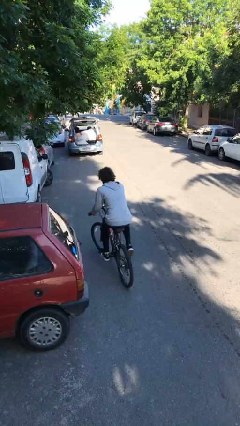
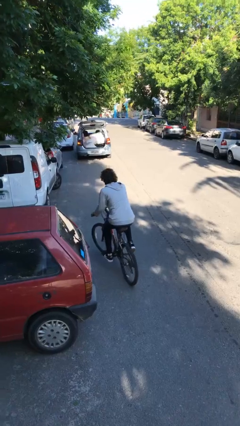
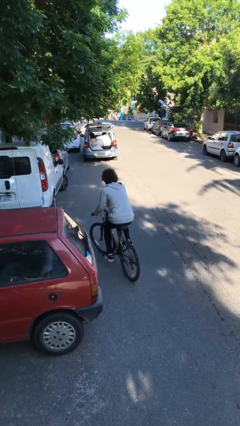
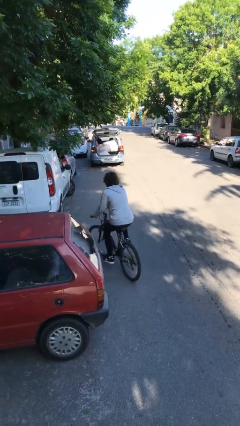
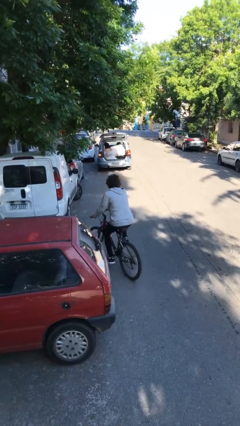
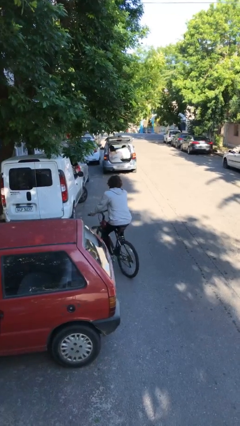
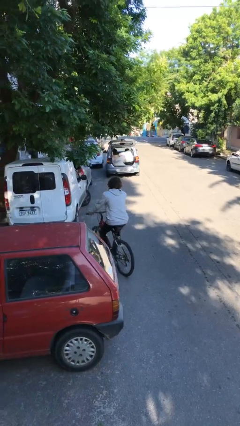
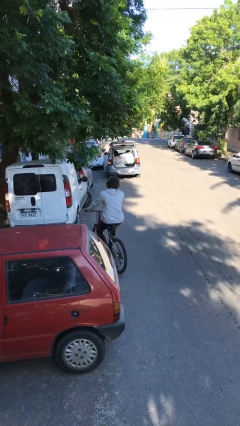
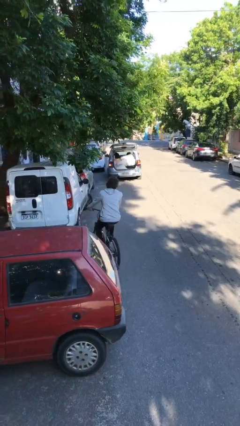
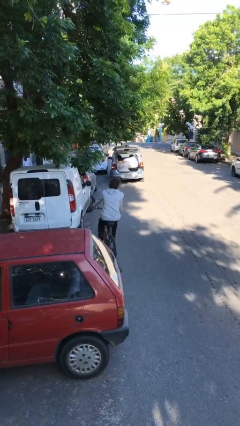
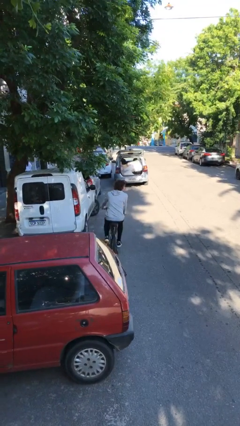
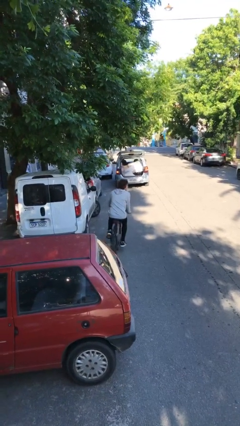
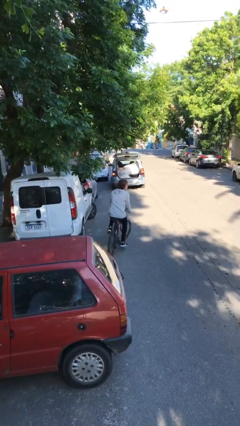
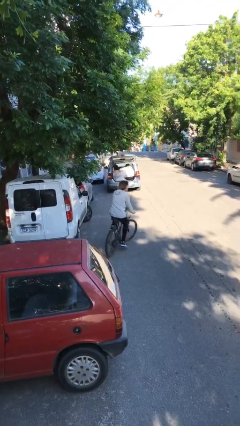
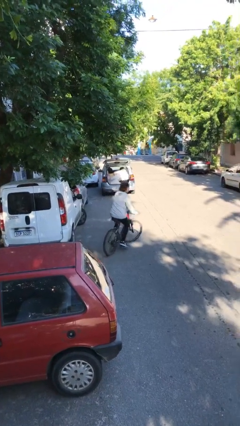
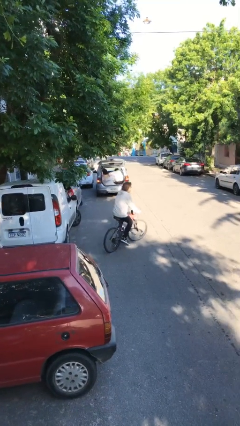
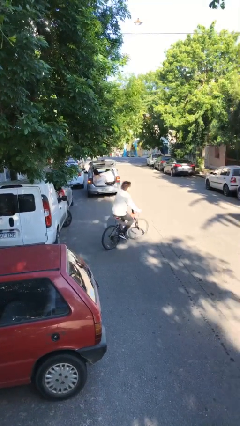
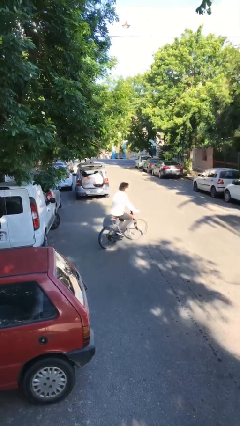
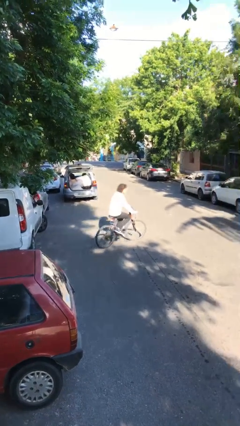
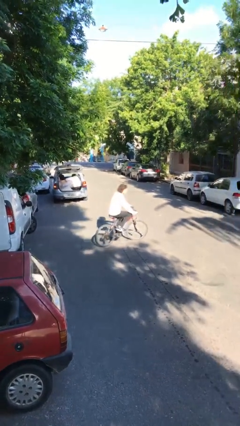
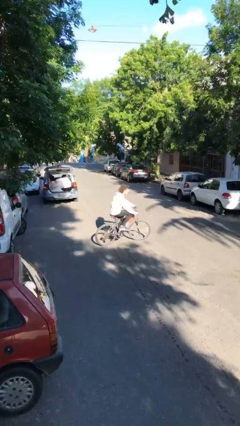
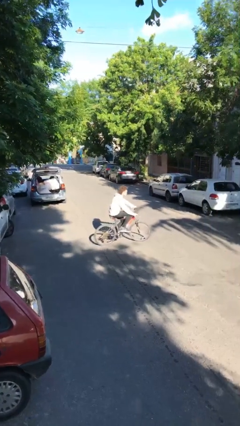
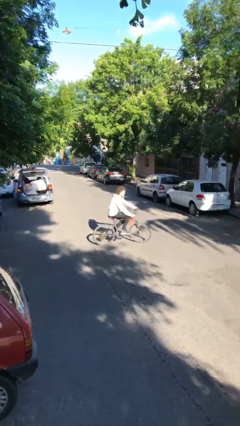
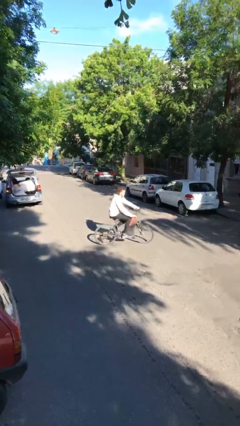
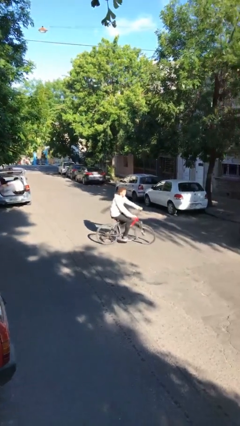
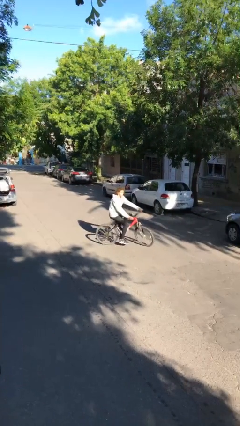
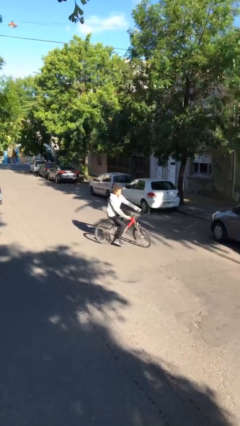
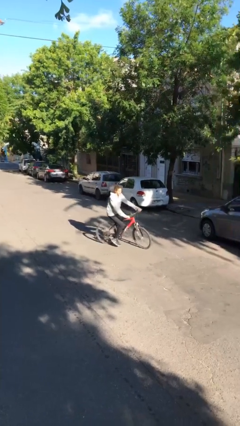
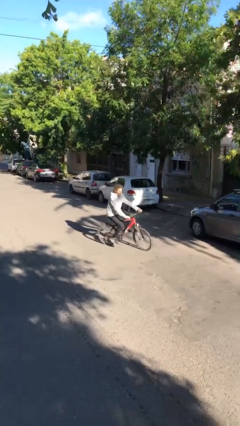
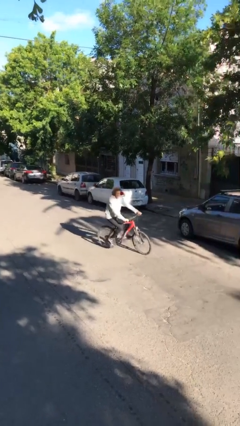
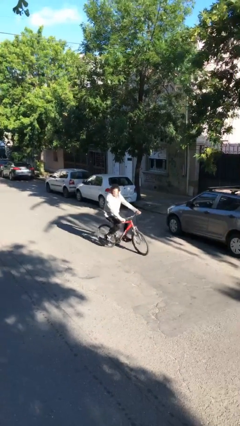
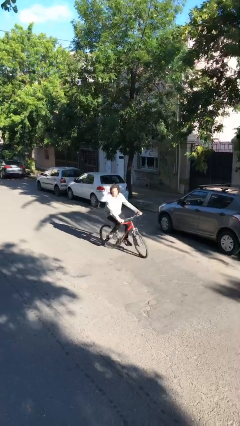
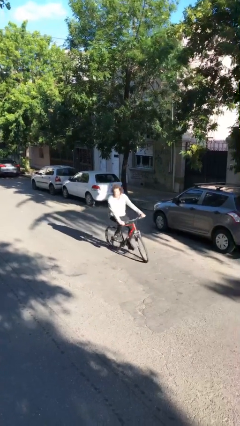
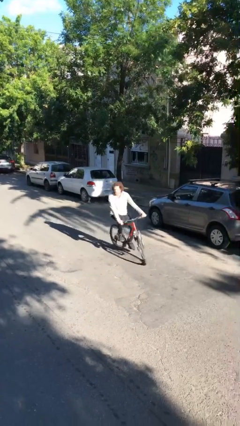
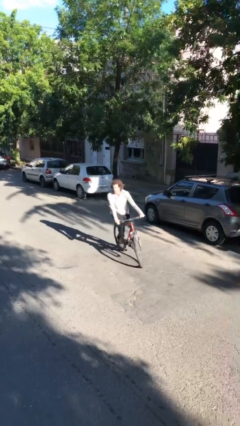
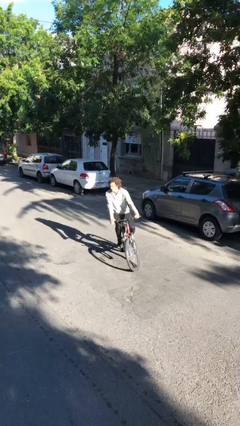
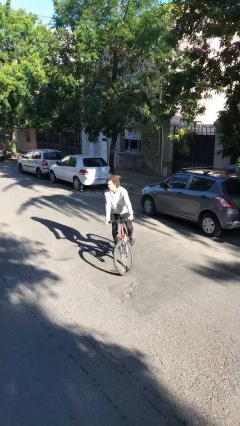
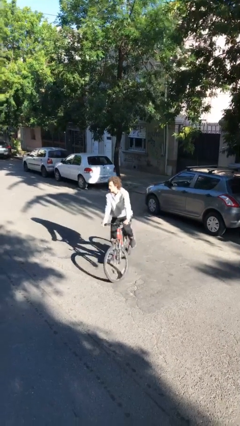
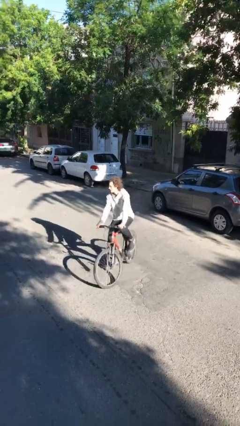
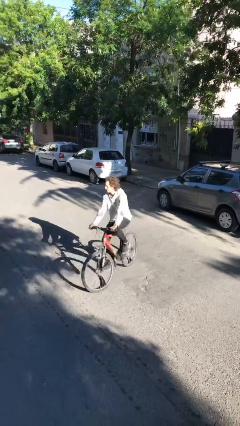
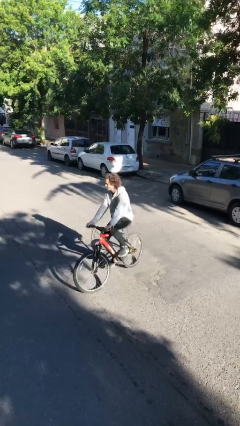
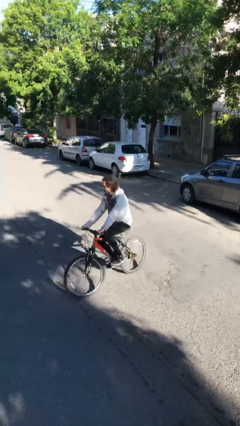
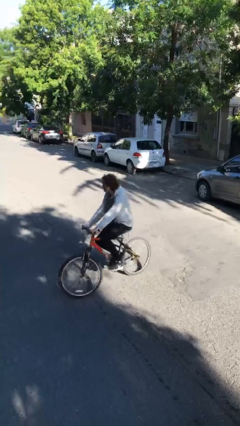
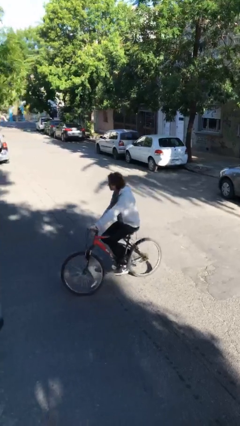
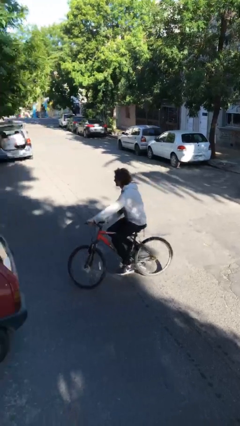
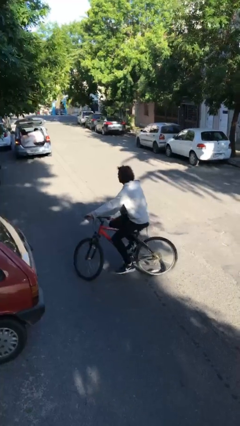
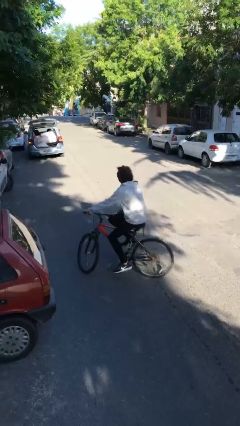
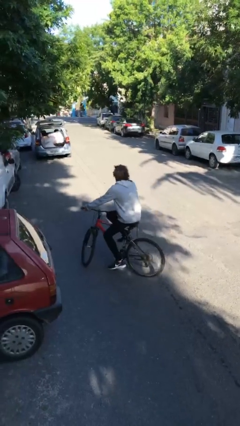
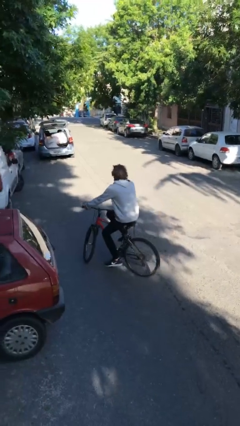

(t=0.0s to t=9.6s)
person rides bicycle

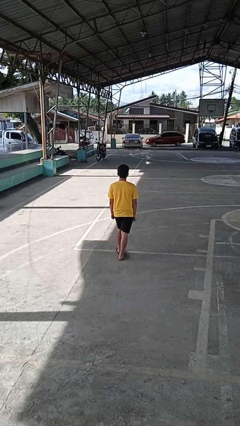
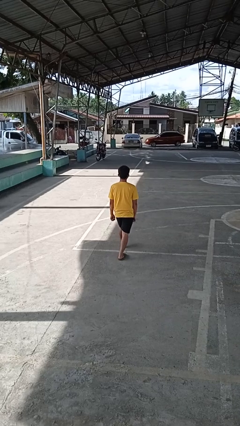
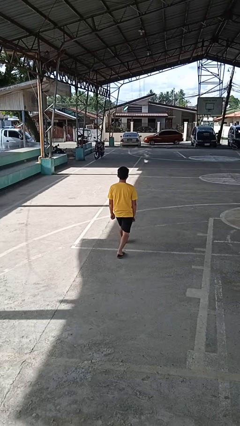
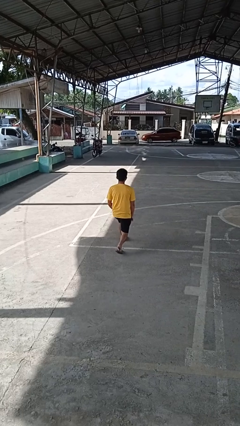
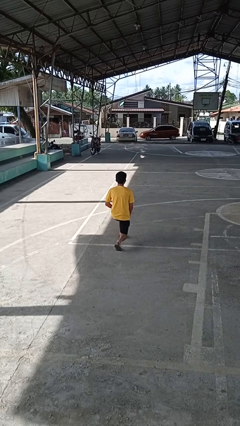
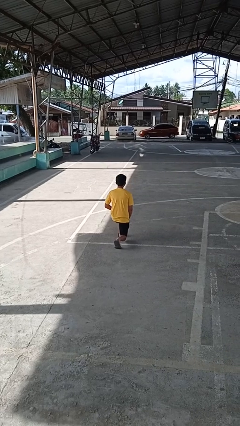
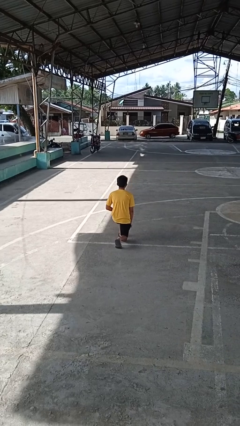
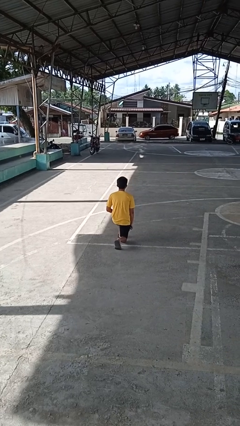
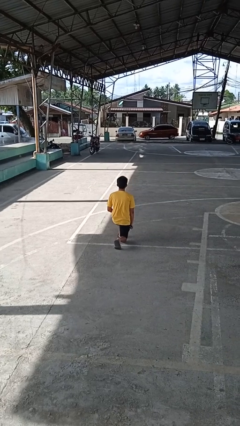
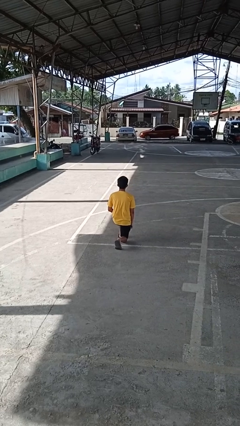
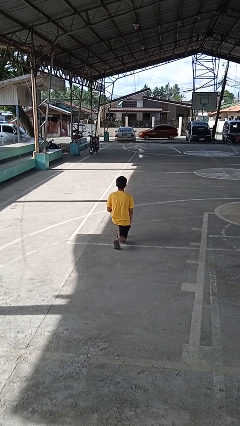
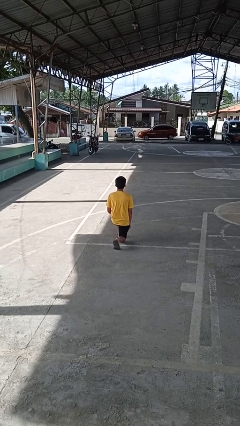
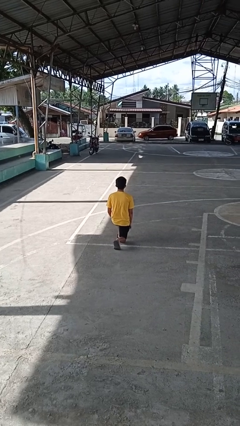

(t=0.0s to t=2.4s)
person kneels

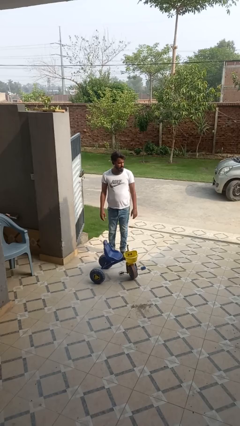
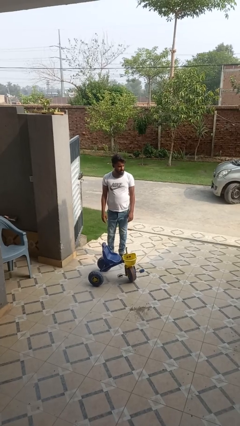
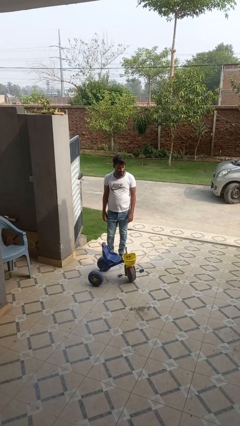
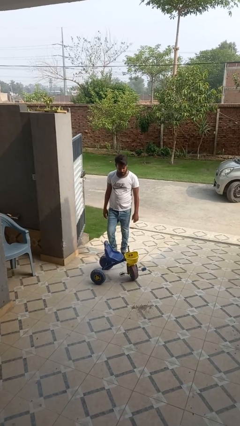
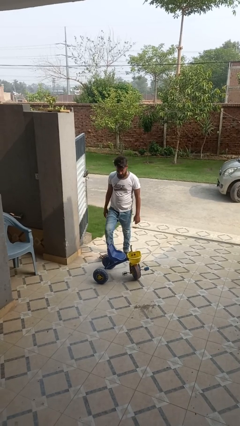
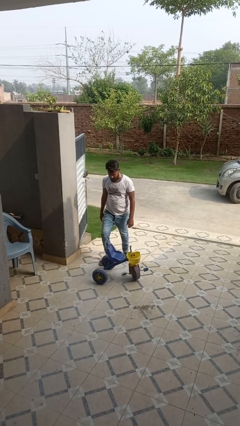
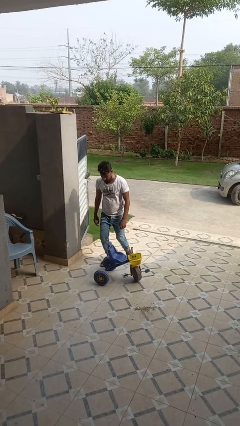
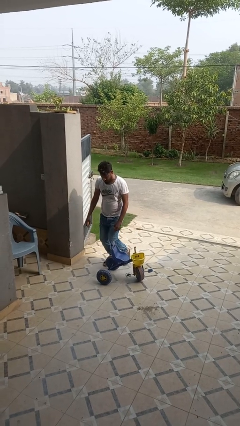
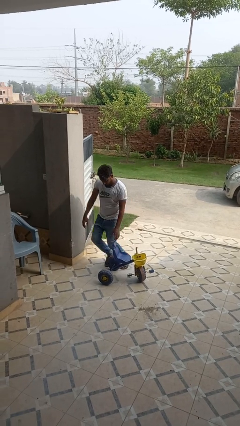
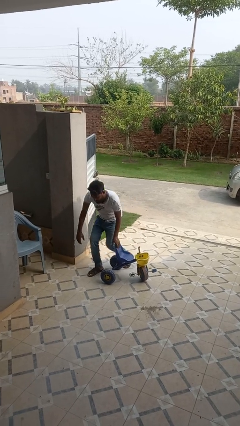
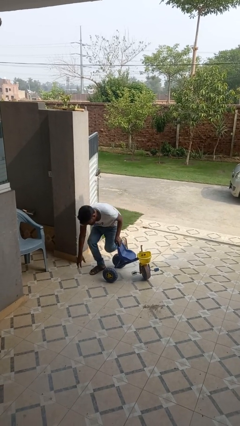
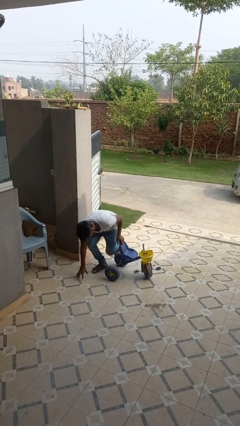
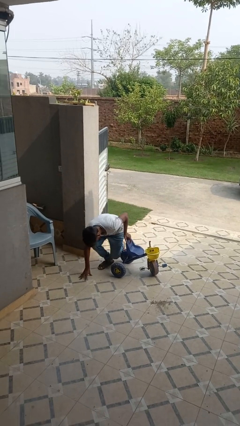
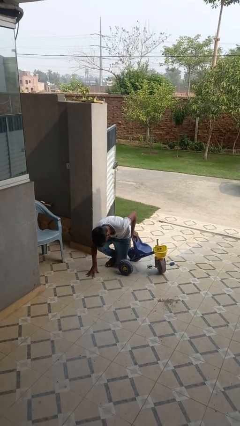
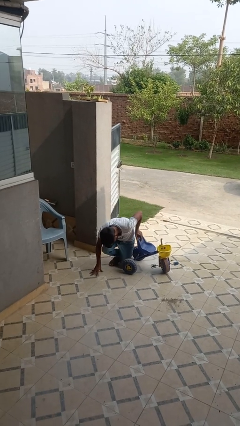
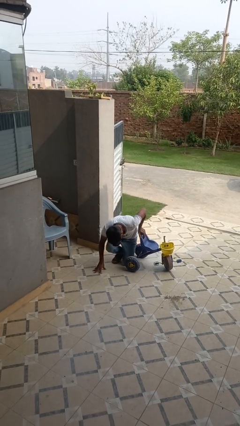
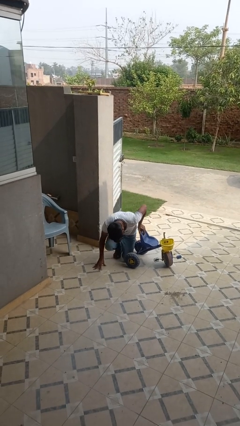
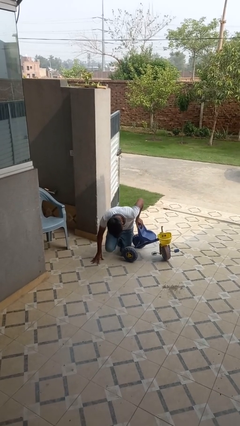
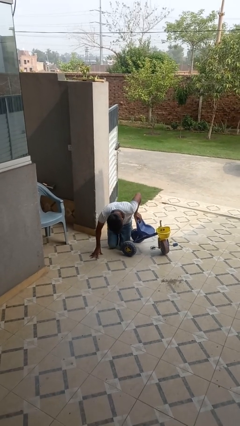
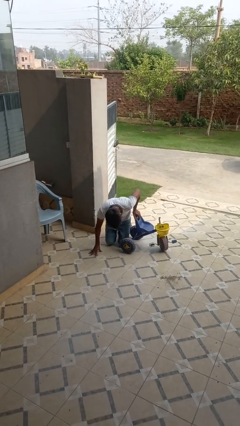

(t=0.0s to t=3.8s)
person trips on object on floor

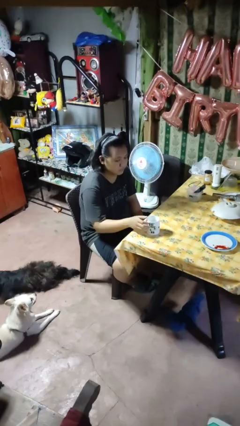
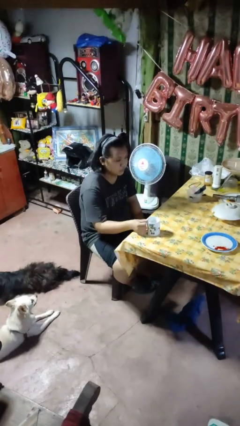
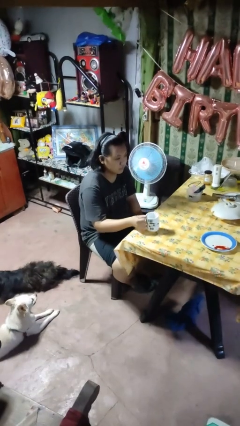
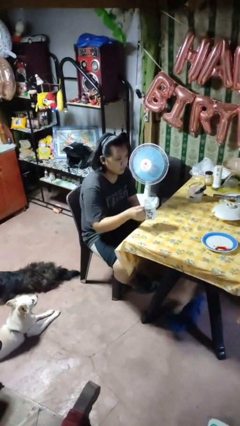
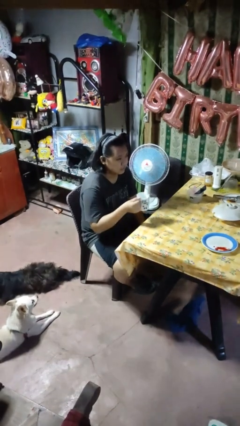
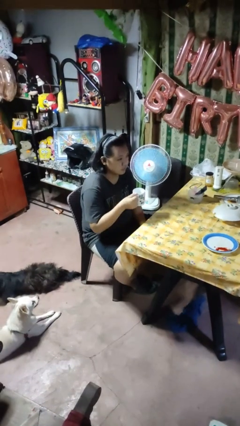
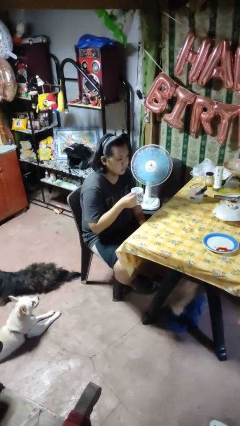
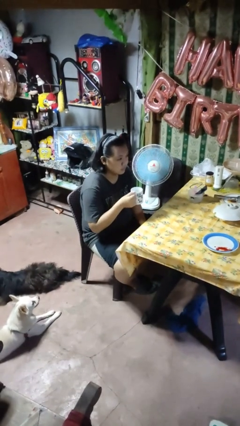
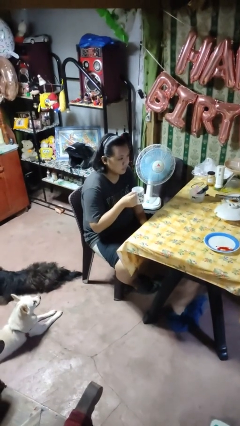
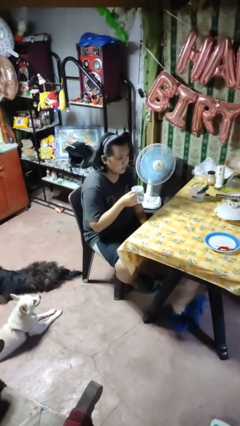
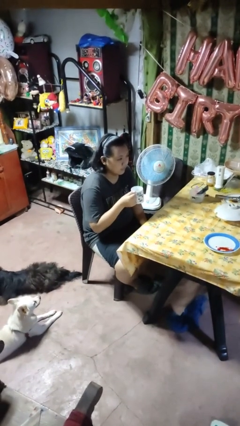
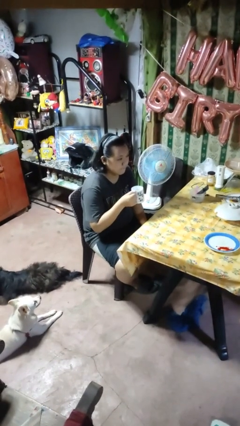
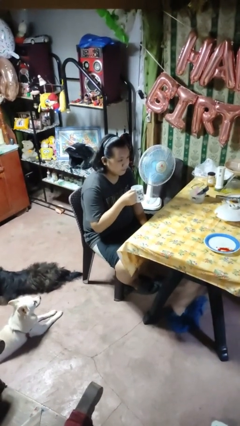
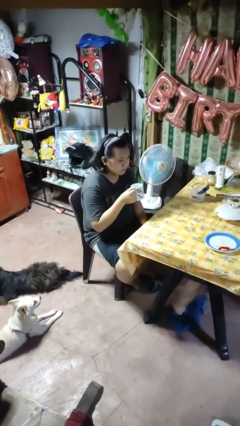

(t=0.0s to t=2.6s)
person picks up object from table
